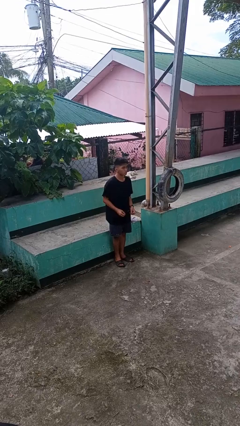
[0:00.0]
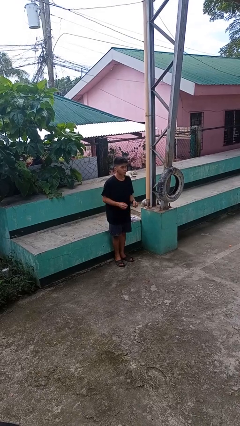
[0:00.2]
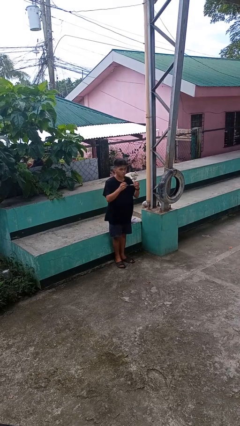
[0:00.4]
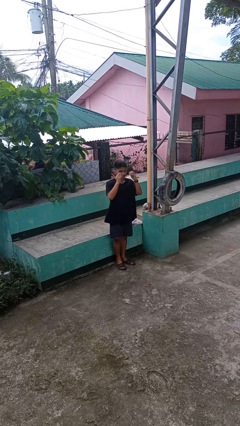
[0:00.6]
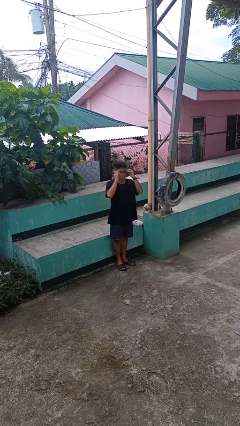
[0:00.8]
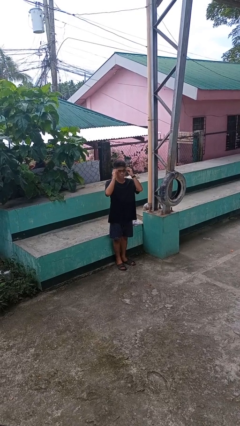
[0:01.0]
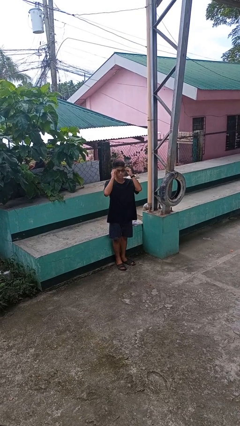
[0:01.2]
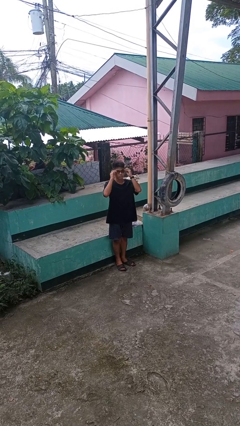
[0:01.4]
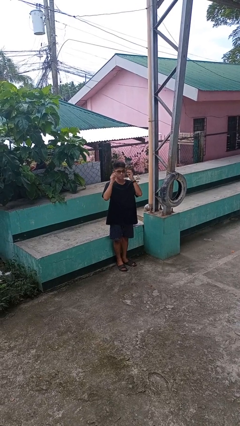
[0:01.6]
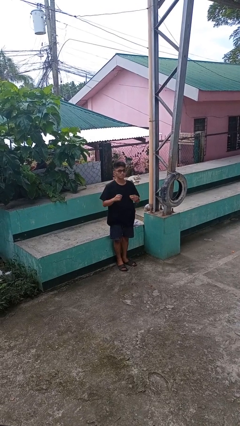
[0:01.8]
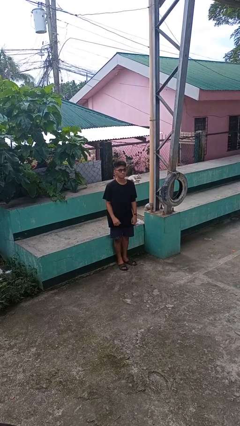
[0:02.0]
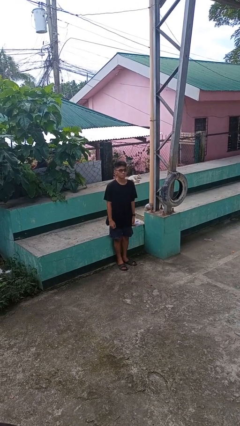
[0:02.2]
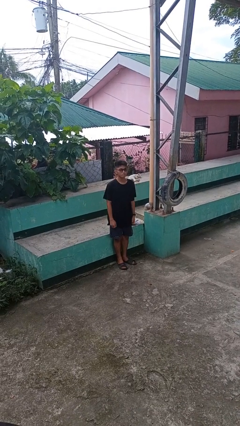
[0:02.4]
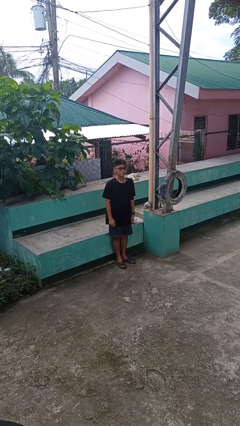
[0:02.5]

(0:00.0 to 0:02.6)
person puts on glasses

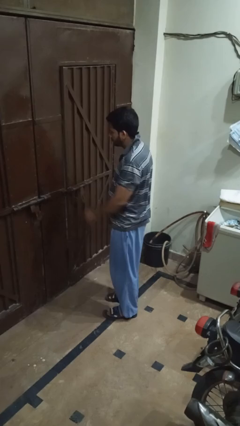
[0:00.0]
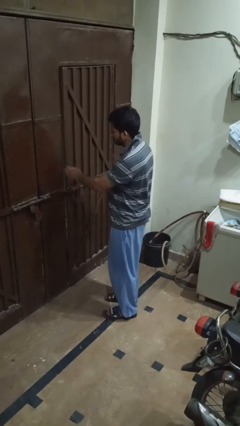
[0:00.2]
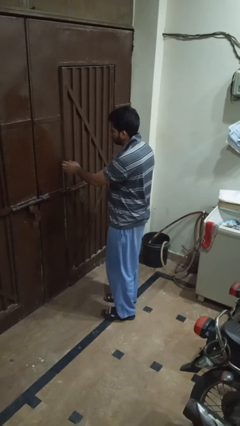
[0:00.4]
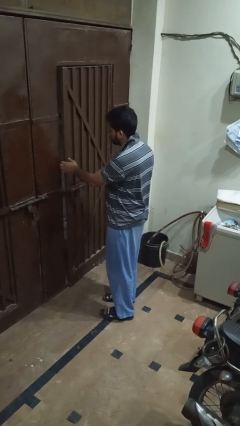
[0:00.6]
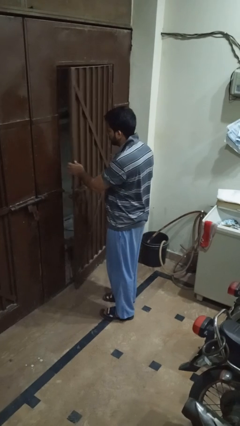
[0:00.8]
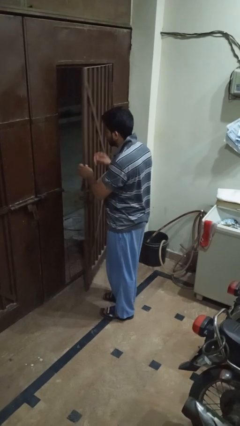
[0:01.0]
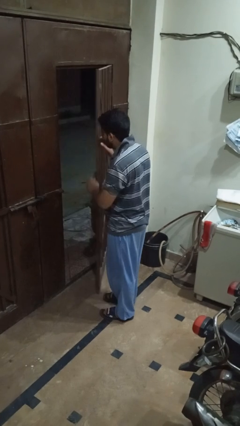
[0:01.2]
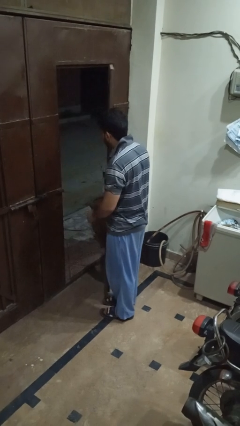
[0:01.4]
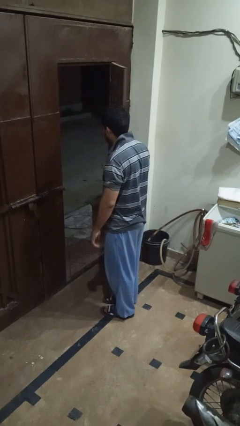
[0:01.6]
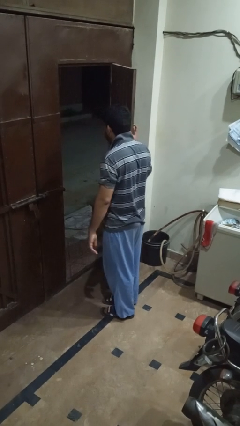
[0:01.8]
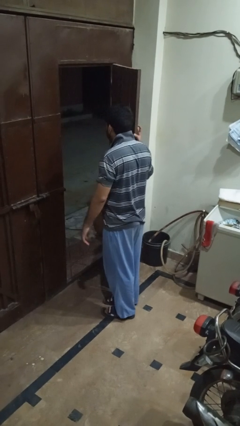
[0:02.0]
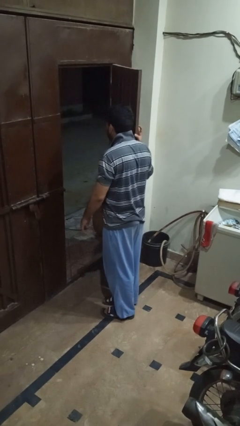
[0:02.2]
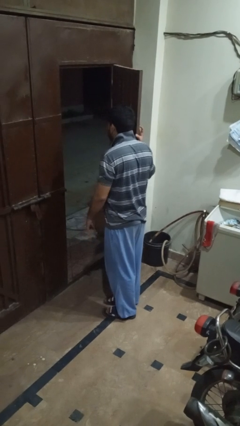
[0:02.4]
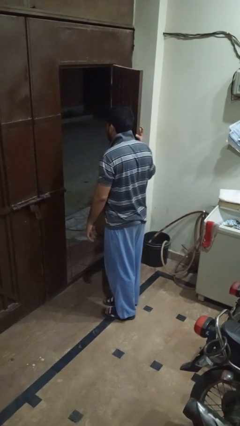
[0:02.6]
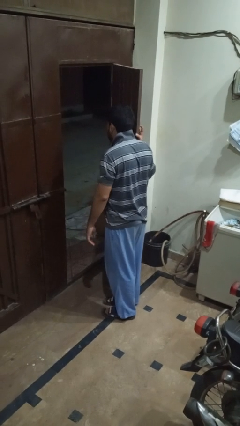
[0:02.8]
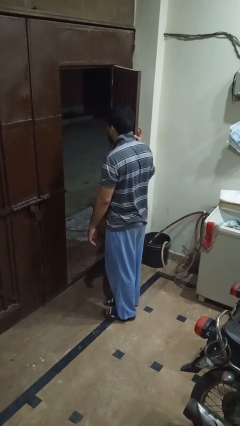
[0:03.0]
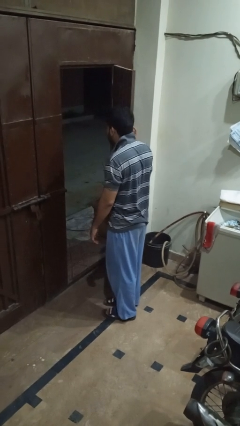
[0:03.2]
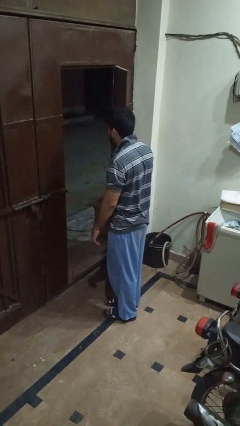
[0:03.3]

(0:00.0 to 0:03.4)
person opens gate

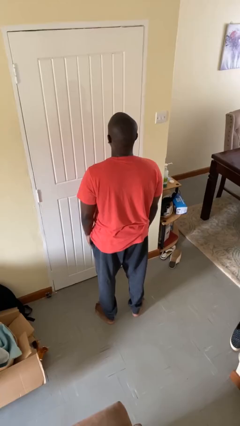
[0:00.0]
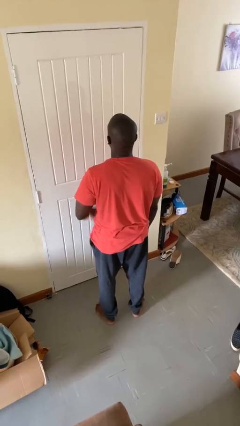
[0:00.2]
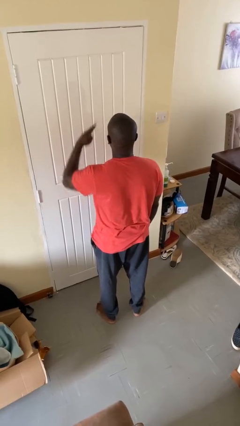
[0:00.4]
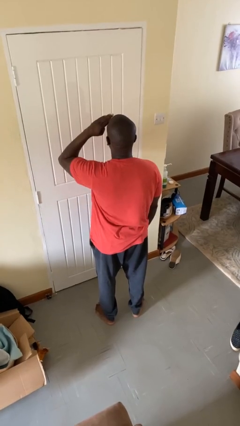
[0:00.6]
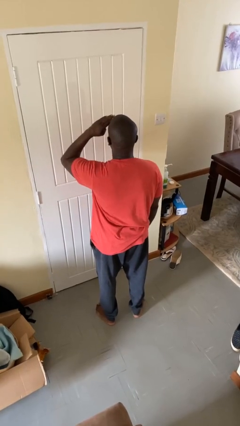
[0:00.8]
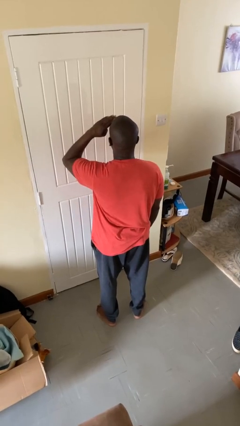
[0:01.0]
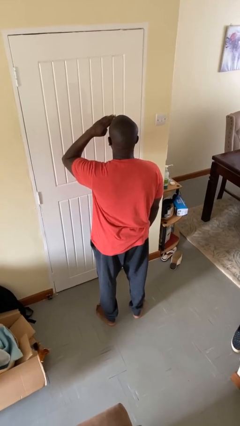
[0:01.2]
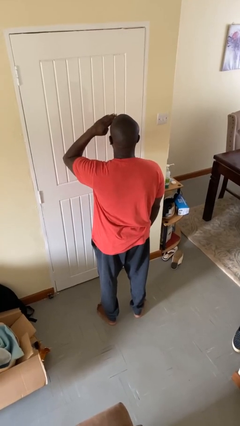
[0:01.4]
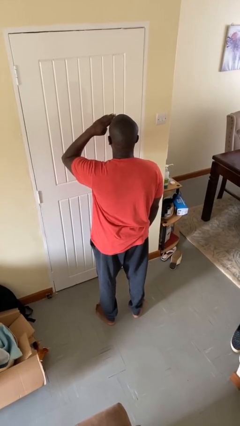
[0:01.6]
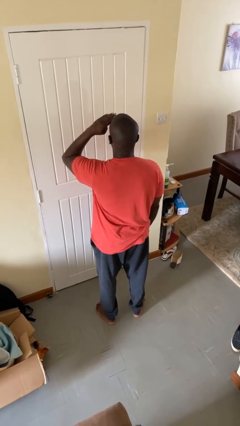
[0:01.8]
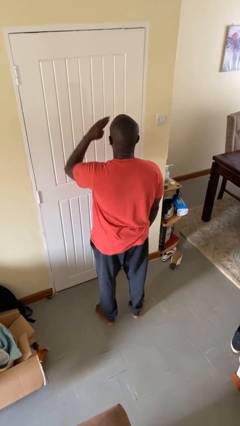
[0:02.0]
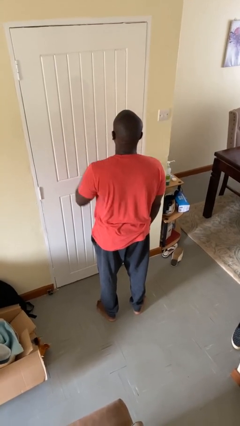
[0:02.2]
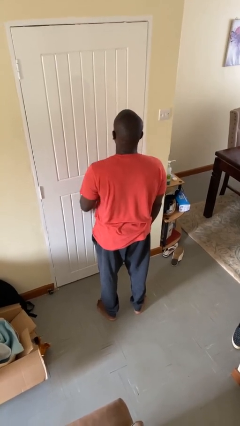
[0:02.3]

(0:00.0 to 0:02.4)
person salutes

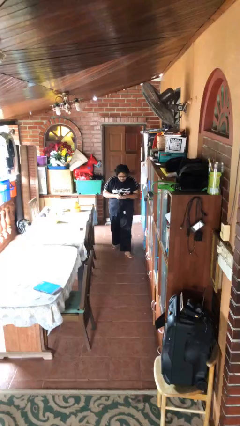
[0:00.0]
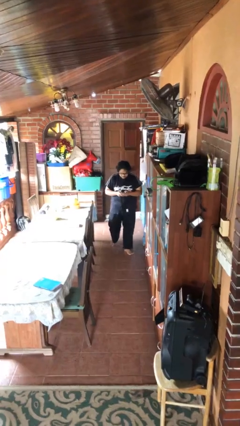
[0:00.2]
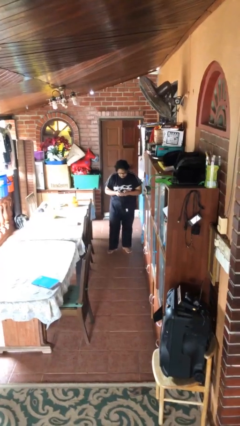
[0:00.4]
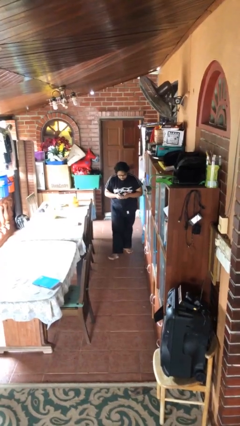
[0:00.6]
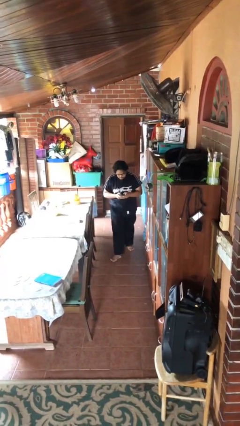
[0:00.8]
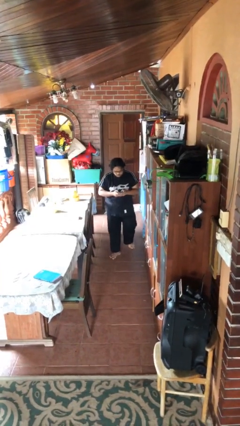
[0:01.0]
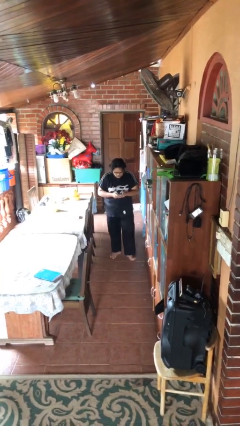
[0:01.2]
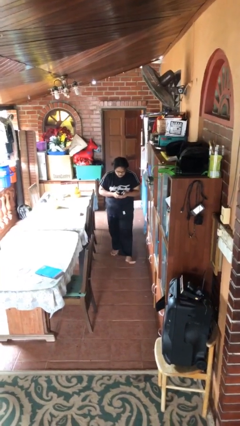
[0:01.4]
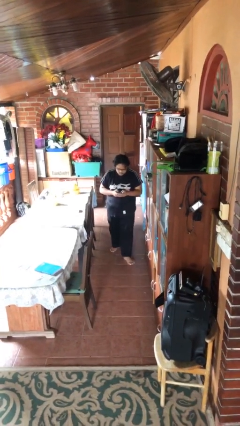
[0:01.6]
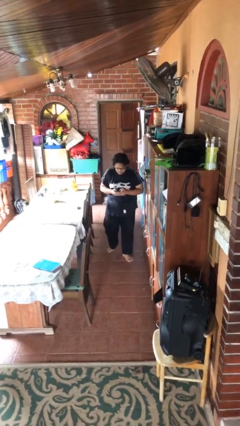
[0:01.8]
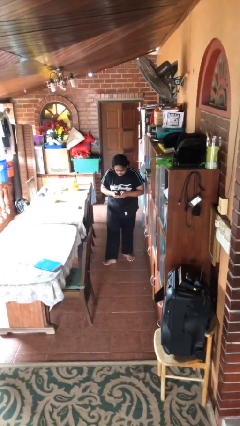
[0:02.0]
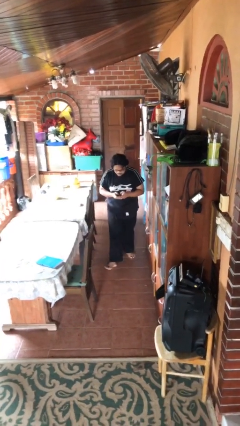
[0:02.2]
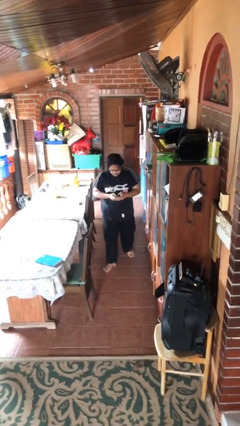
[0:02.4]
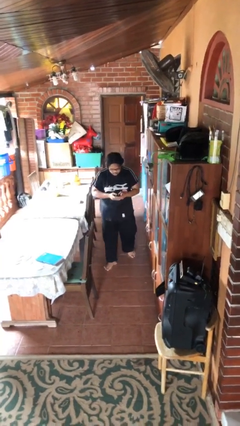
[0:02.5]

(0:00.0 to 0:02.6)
person texts on phone

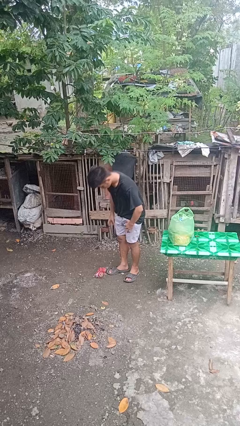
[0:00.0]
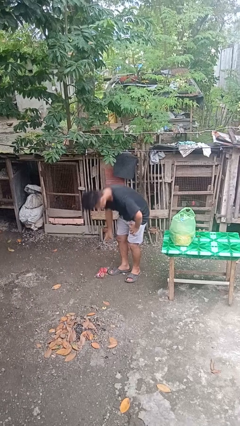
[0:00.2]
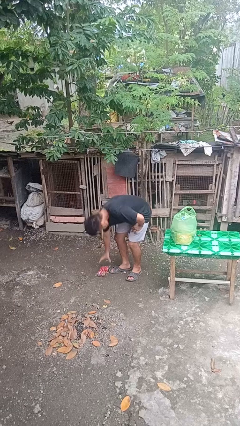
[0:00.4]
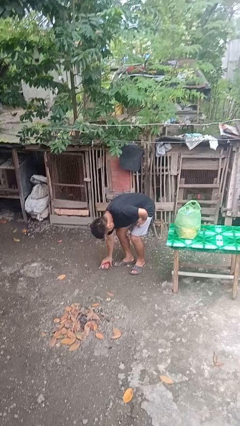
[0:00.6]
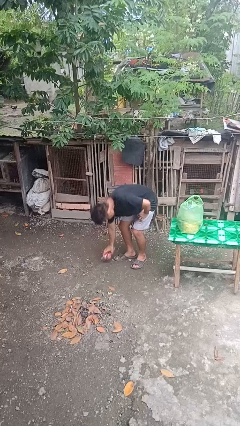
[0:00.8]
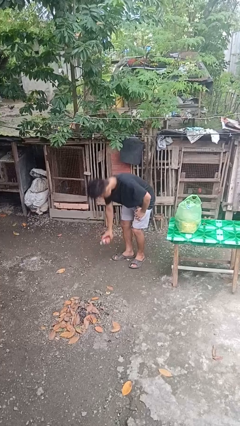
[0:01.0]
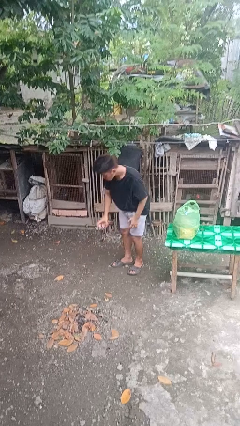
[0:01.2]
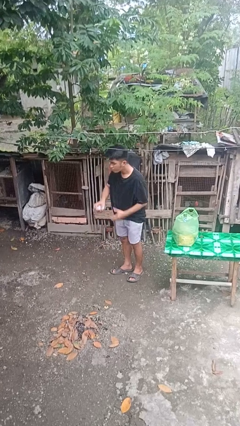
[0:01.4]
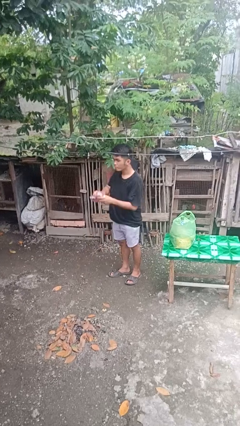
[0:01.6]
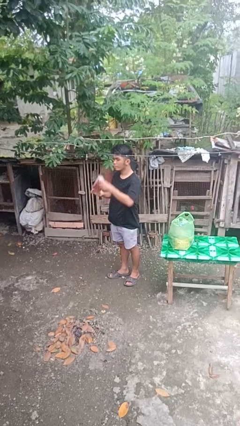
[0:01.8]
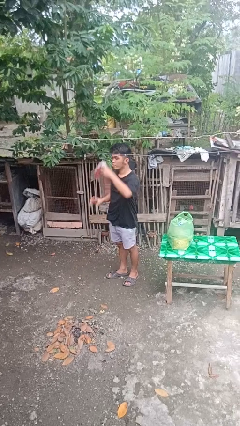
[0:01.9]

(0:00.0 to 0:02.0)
person picks up object from floor

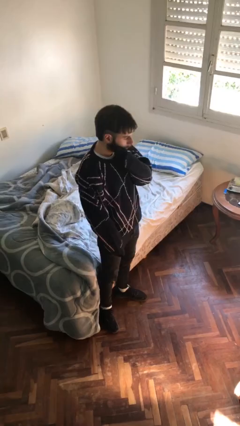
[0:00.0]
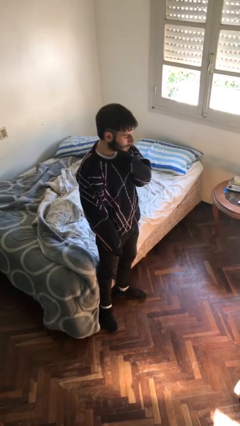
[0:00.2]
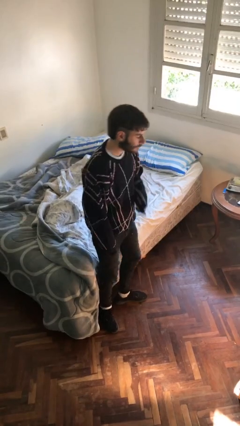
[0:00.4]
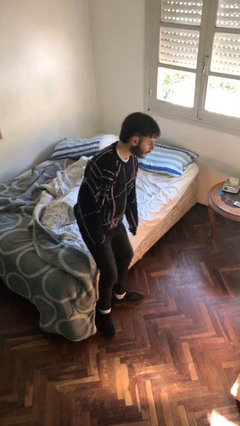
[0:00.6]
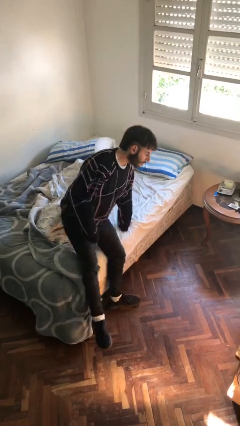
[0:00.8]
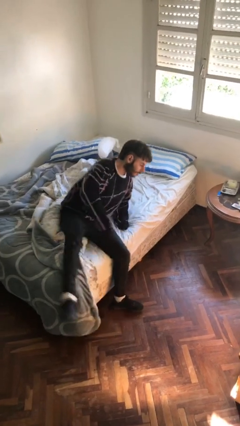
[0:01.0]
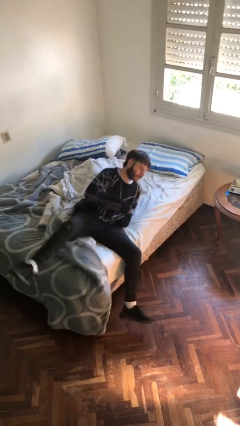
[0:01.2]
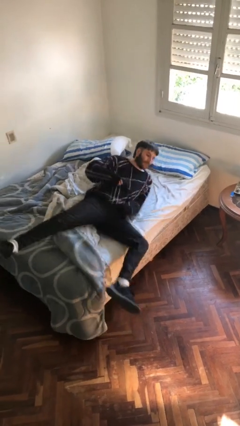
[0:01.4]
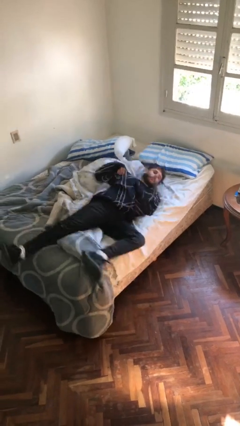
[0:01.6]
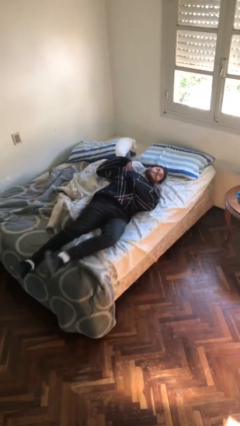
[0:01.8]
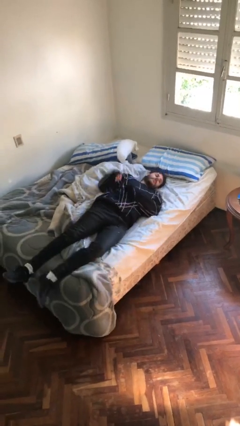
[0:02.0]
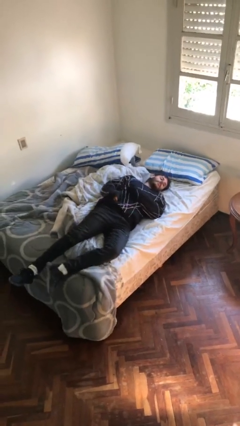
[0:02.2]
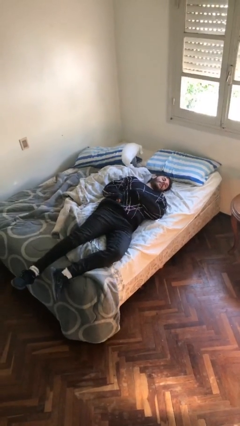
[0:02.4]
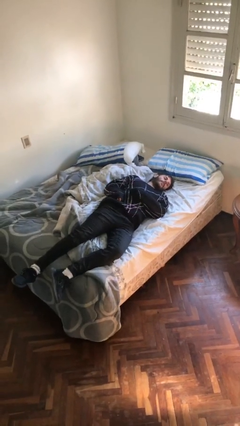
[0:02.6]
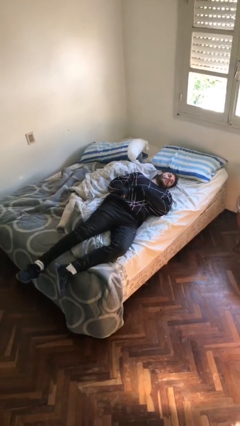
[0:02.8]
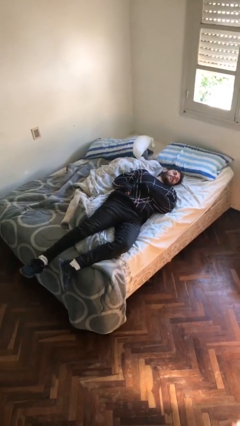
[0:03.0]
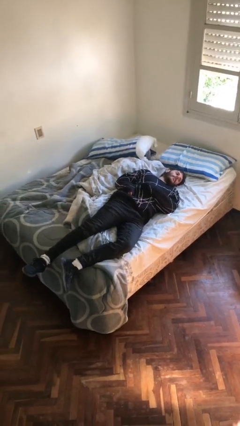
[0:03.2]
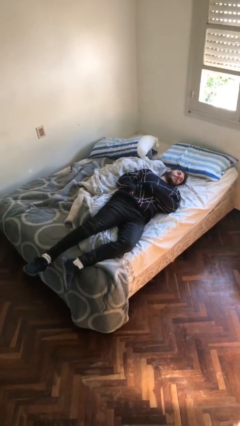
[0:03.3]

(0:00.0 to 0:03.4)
person lies down on bed

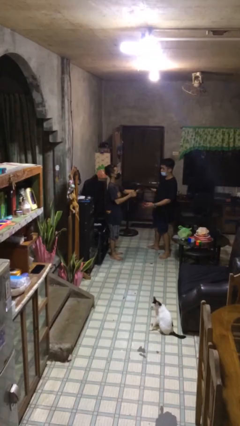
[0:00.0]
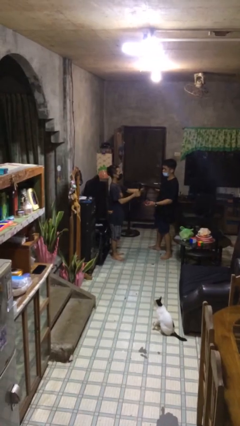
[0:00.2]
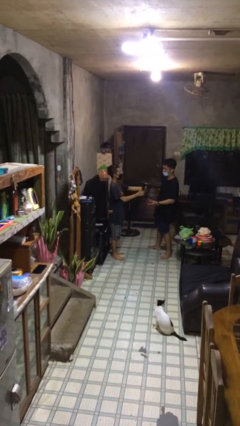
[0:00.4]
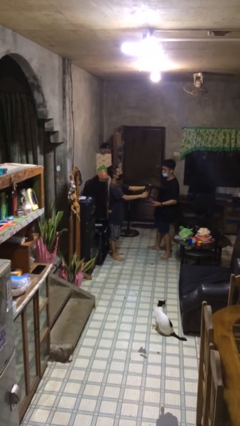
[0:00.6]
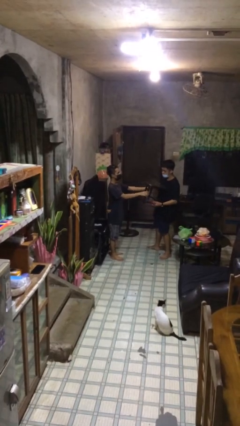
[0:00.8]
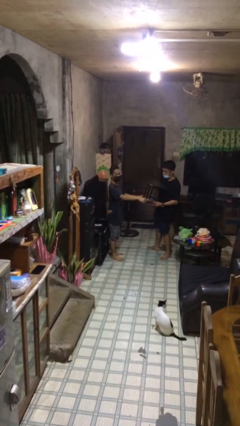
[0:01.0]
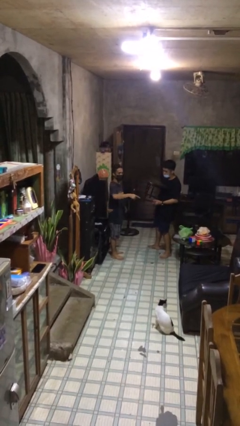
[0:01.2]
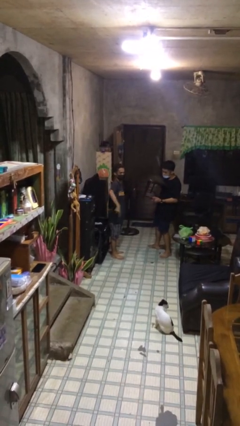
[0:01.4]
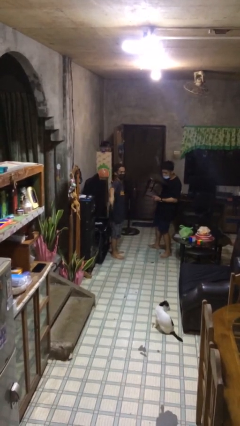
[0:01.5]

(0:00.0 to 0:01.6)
person transfers object to person
